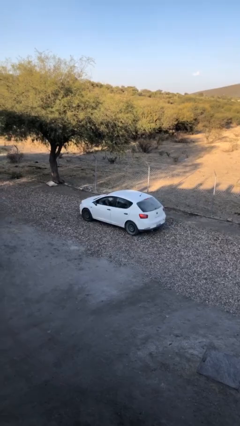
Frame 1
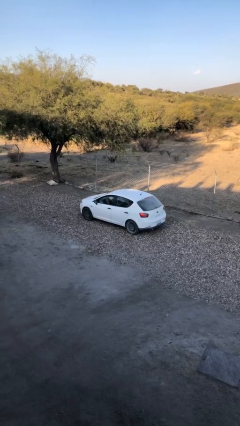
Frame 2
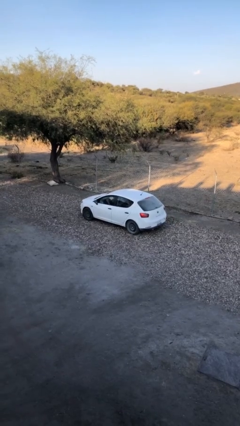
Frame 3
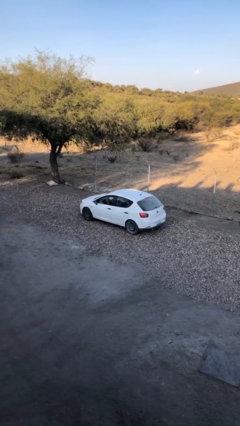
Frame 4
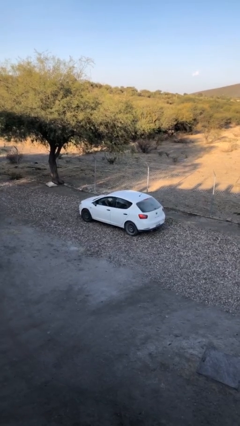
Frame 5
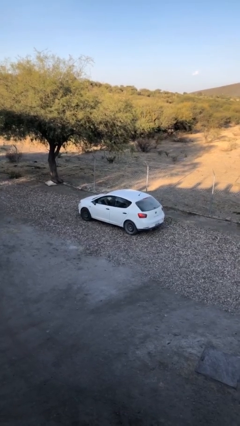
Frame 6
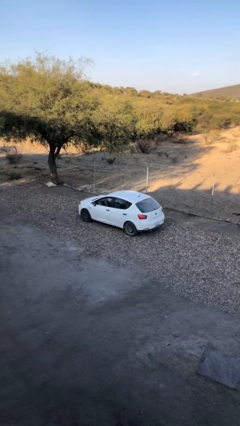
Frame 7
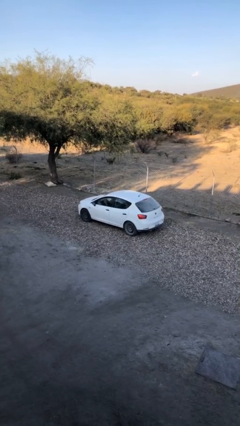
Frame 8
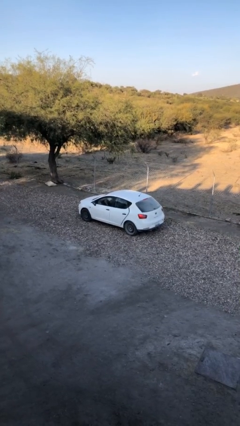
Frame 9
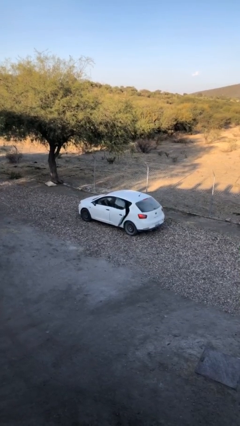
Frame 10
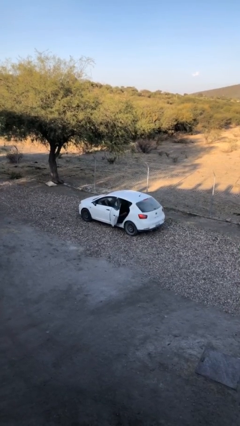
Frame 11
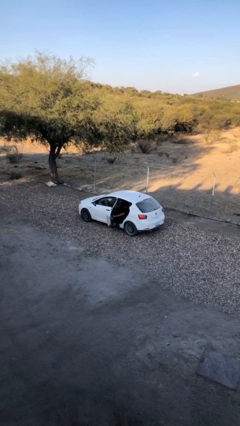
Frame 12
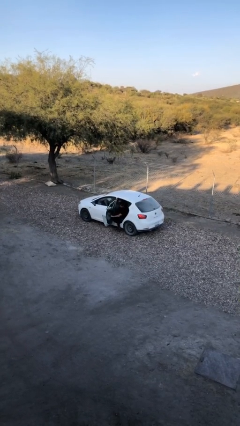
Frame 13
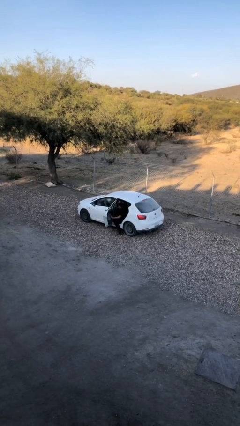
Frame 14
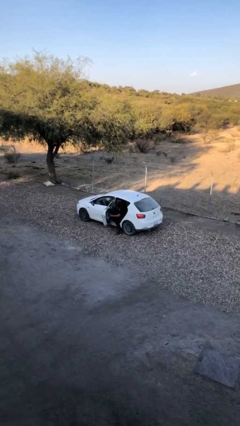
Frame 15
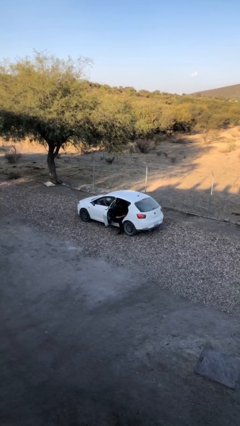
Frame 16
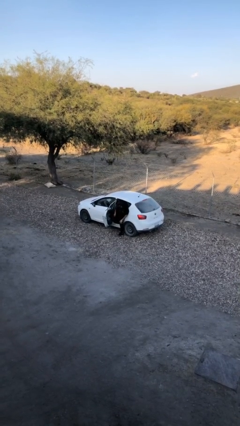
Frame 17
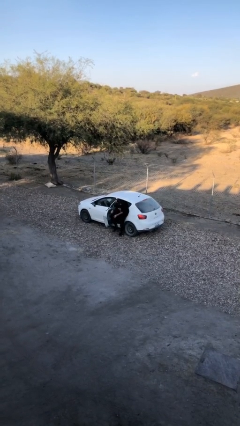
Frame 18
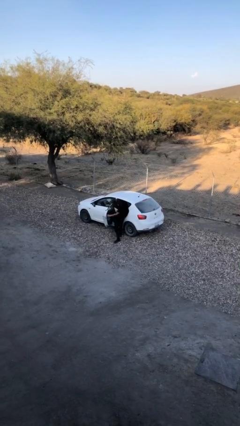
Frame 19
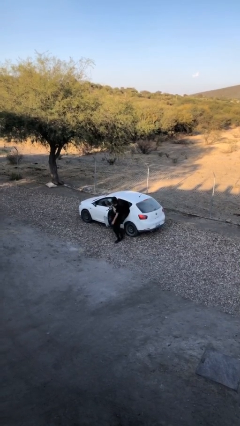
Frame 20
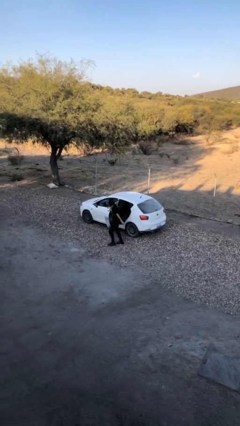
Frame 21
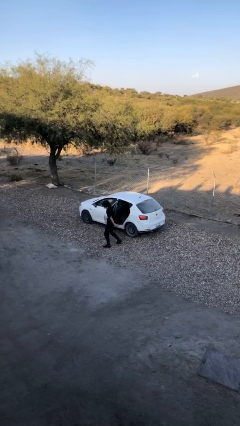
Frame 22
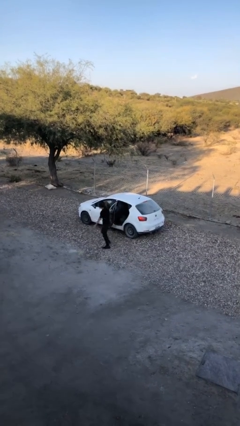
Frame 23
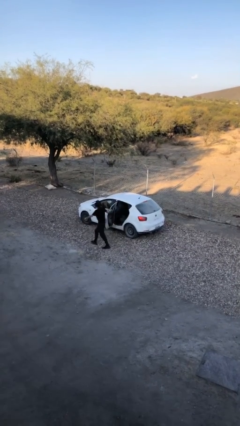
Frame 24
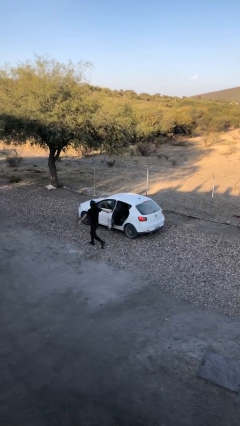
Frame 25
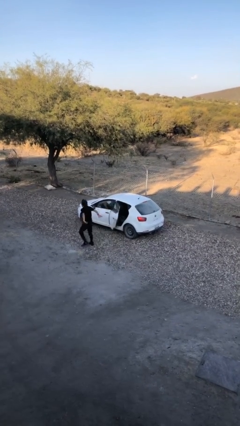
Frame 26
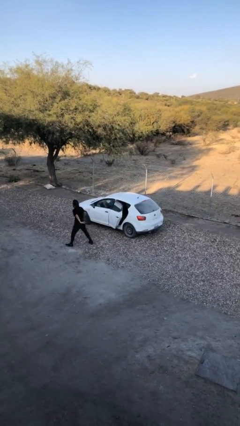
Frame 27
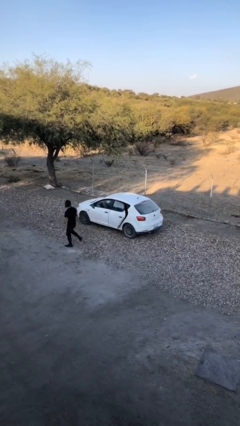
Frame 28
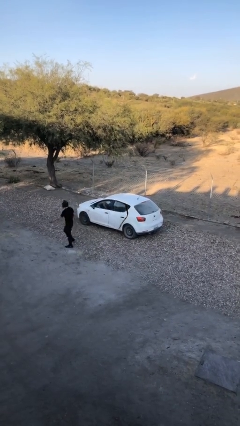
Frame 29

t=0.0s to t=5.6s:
car drops off person

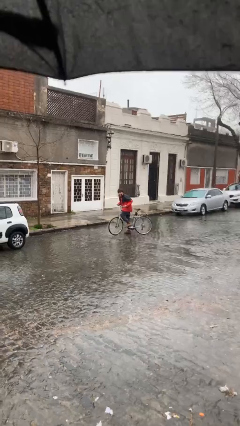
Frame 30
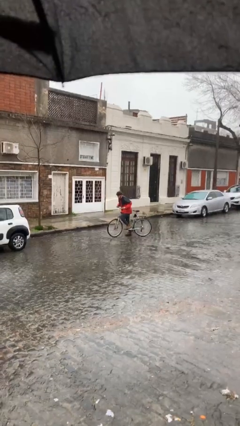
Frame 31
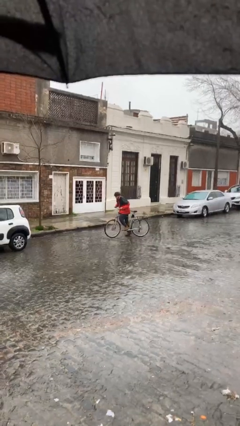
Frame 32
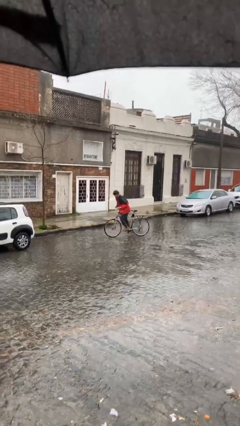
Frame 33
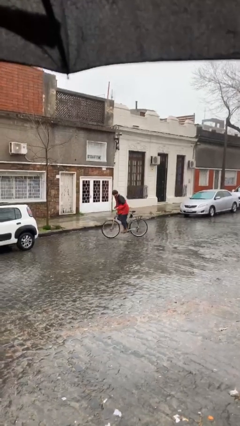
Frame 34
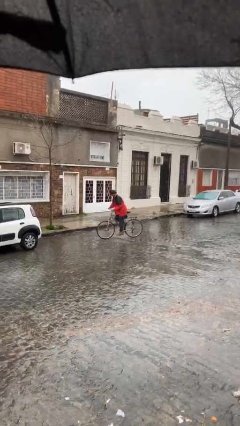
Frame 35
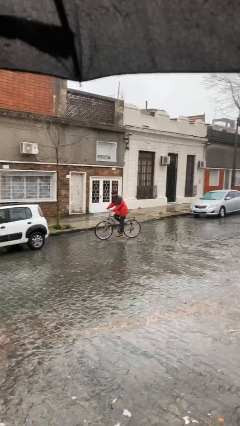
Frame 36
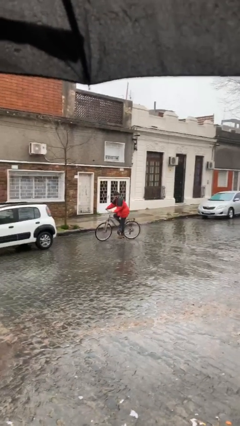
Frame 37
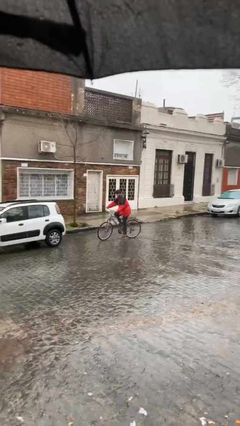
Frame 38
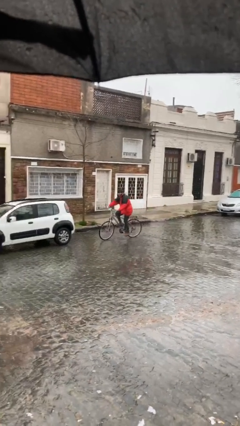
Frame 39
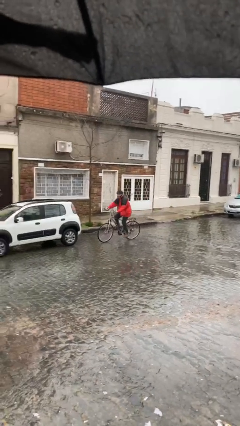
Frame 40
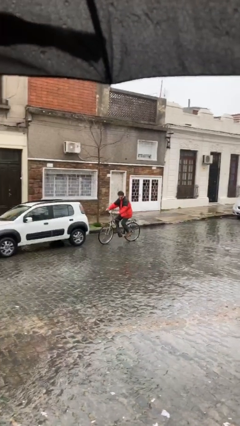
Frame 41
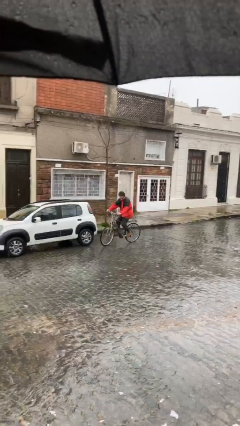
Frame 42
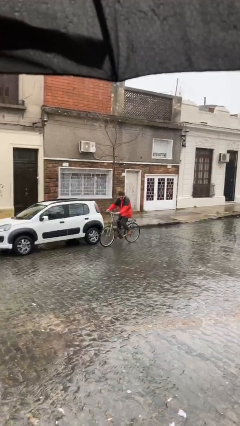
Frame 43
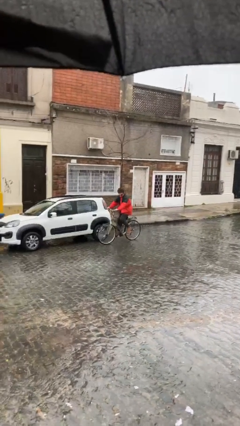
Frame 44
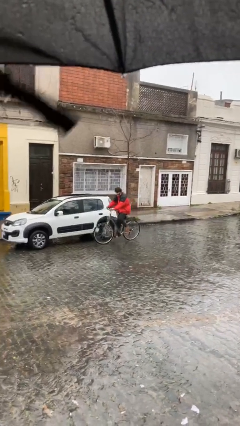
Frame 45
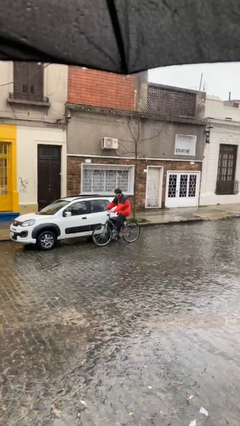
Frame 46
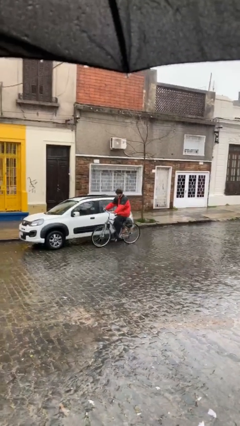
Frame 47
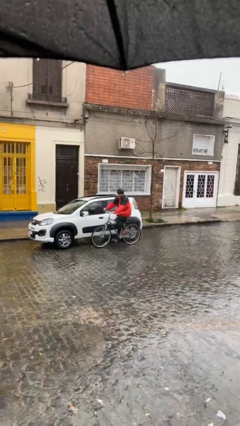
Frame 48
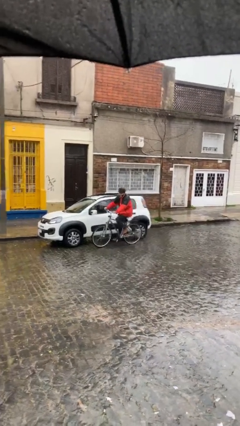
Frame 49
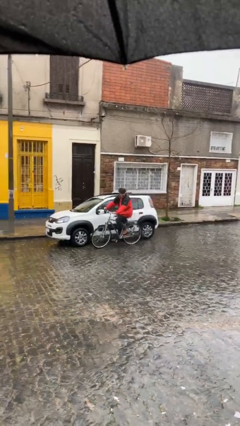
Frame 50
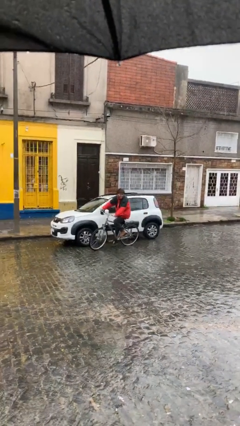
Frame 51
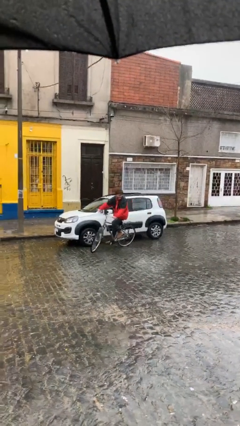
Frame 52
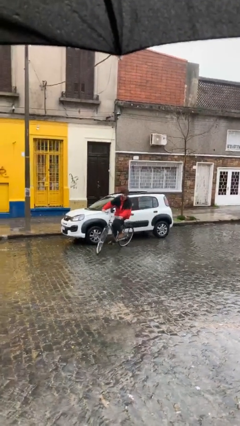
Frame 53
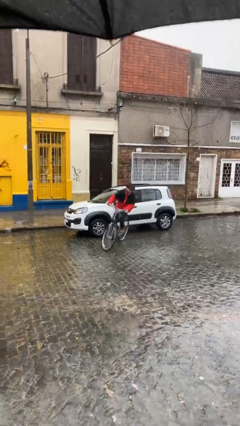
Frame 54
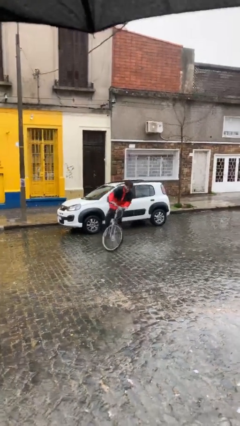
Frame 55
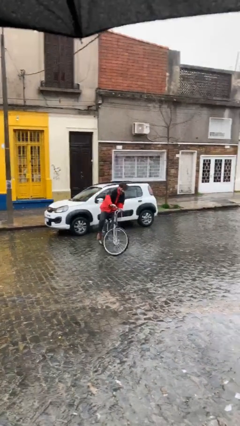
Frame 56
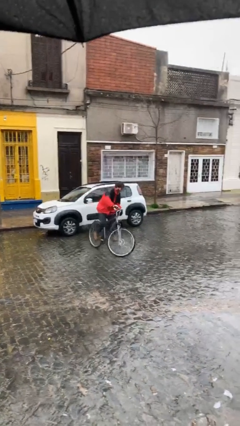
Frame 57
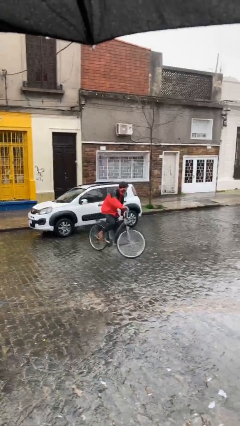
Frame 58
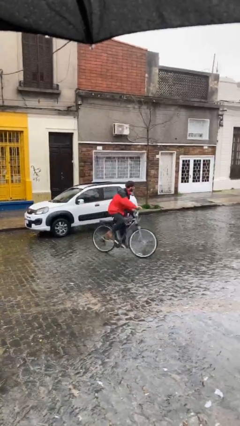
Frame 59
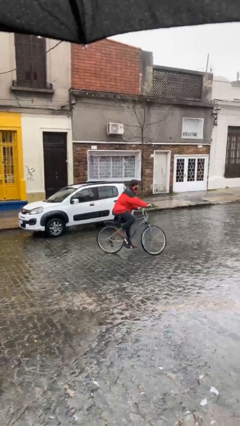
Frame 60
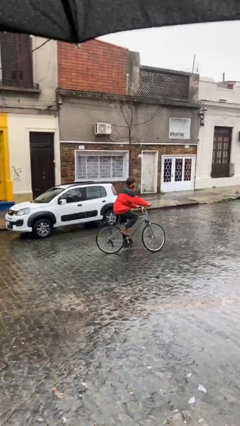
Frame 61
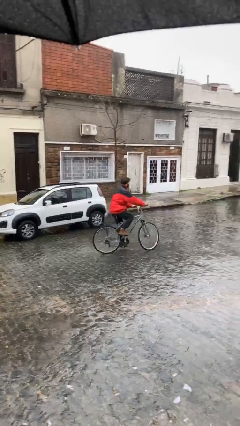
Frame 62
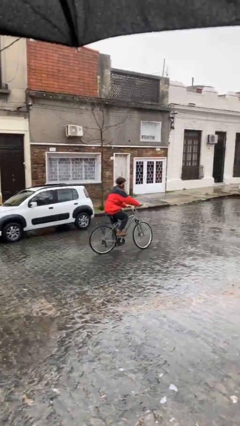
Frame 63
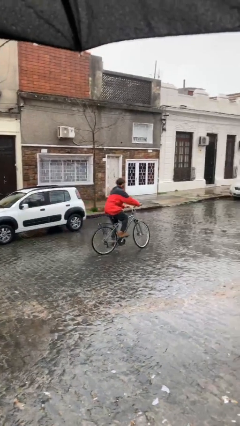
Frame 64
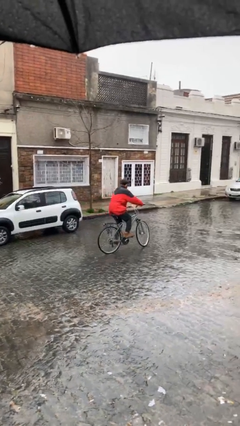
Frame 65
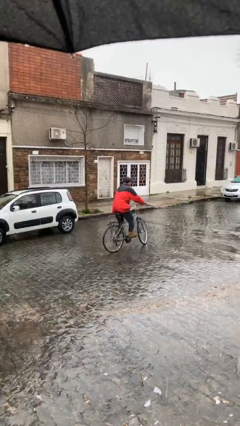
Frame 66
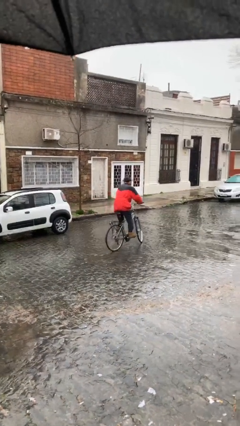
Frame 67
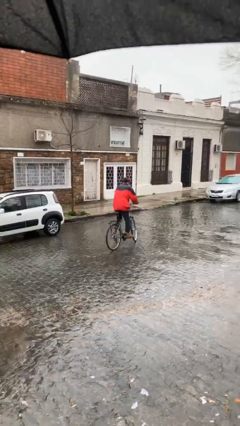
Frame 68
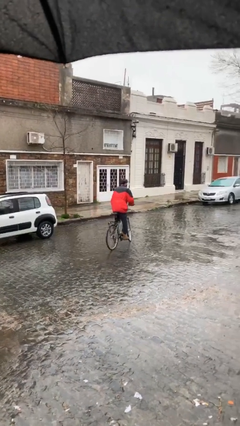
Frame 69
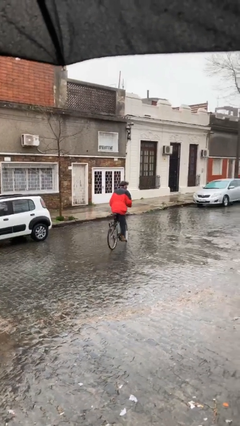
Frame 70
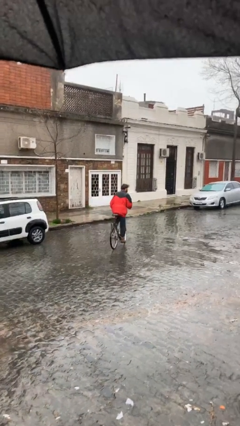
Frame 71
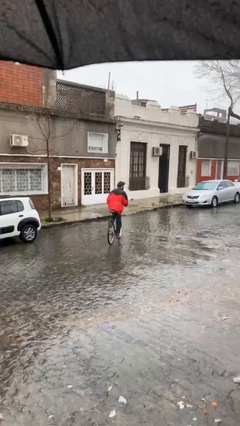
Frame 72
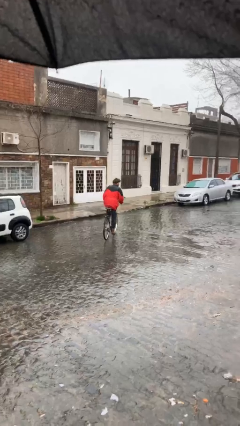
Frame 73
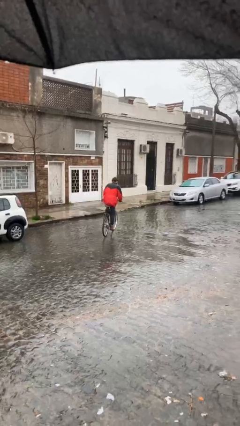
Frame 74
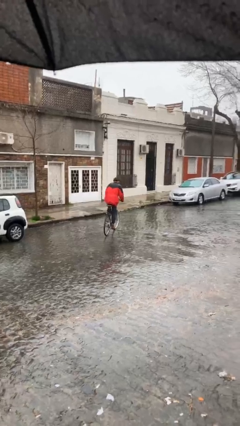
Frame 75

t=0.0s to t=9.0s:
person rides bicycle

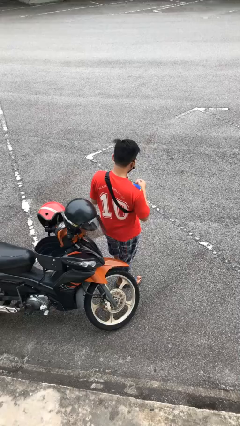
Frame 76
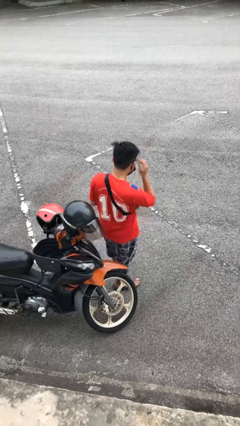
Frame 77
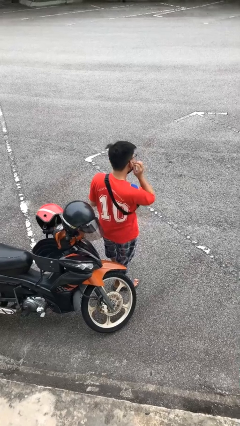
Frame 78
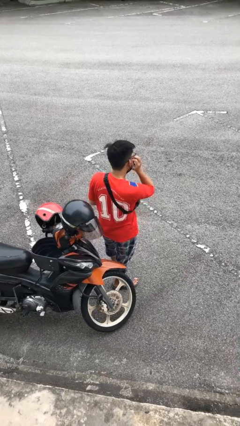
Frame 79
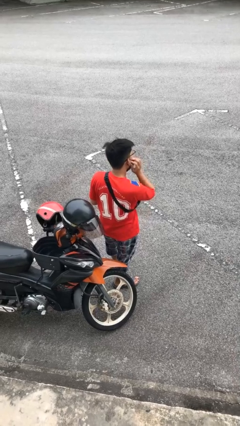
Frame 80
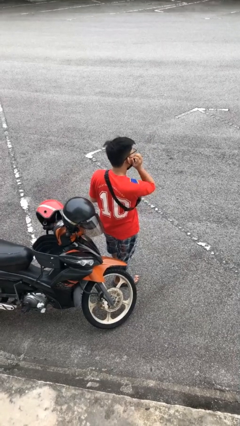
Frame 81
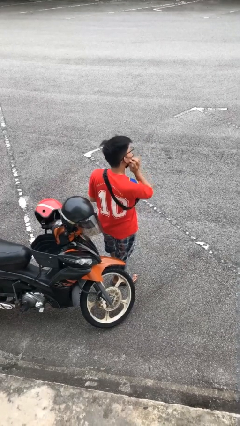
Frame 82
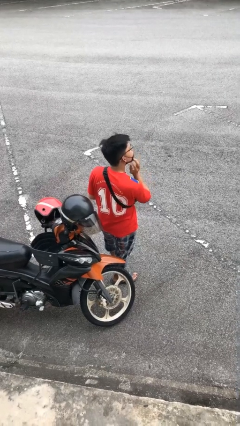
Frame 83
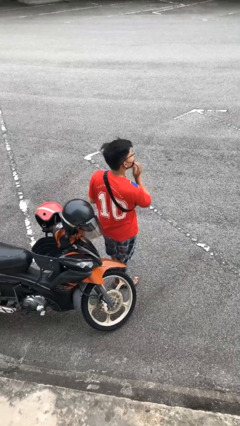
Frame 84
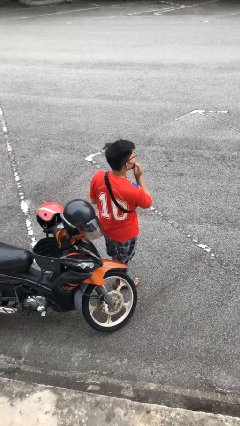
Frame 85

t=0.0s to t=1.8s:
person scratches face

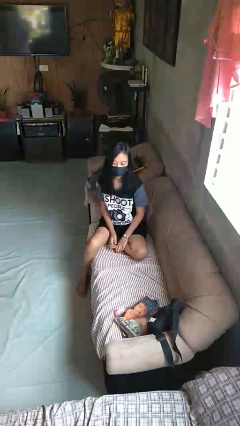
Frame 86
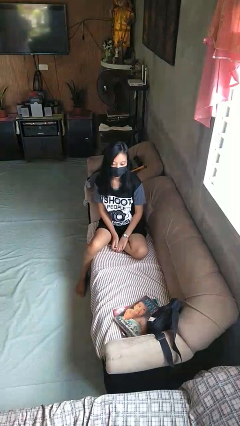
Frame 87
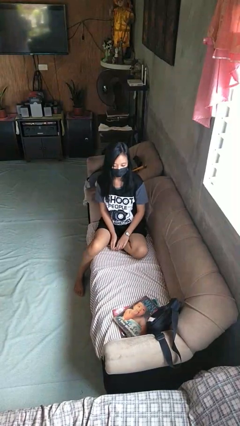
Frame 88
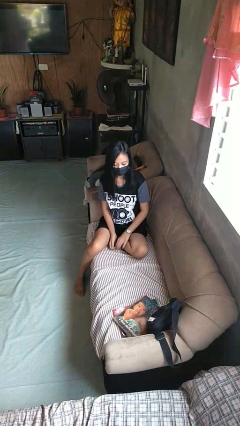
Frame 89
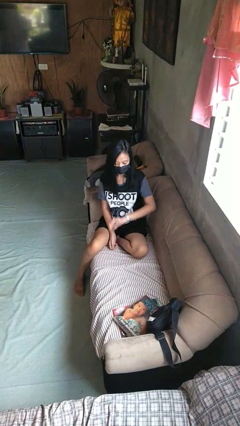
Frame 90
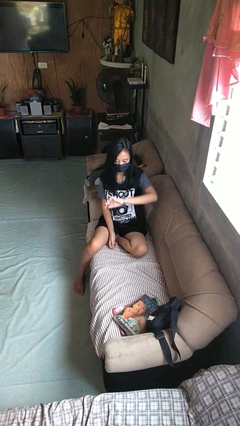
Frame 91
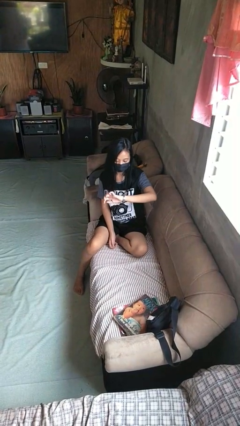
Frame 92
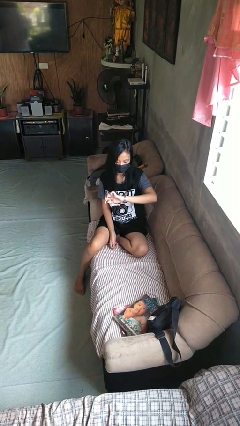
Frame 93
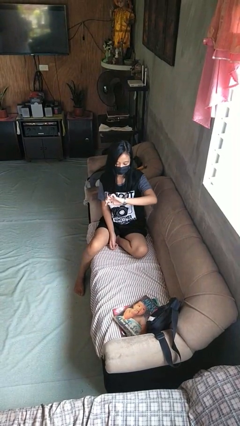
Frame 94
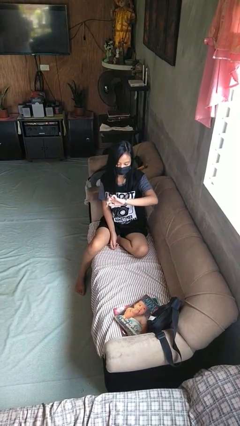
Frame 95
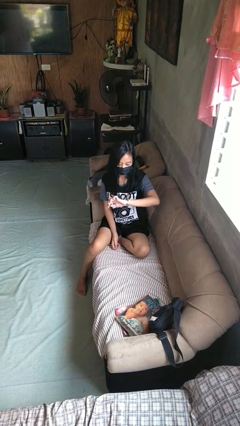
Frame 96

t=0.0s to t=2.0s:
person looks at wristwatch
